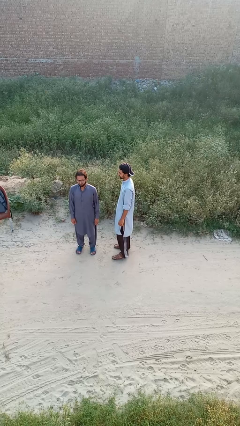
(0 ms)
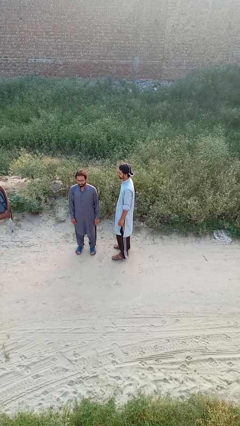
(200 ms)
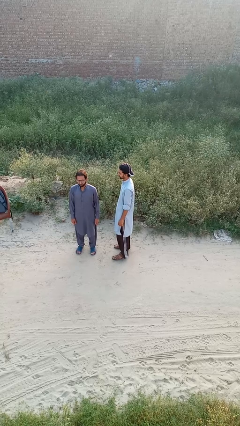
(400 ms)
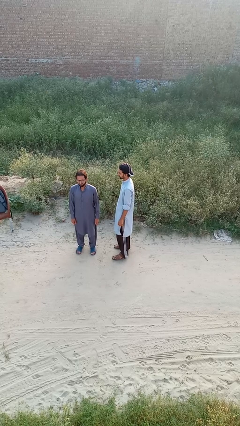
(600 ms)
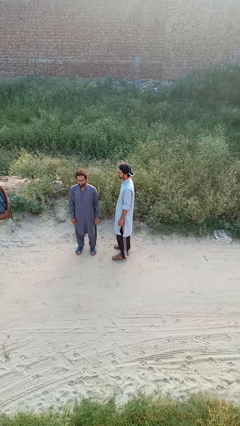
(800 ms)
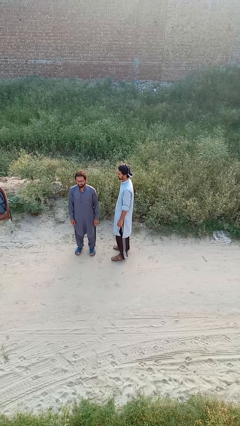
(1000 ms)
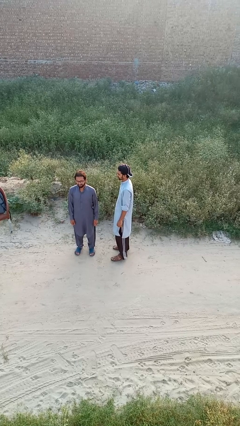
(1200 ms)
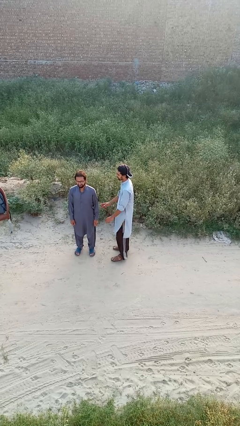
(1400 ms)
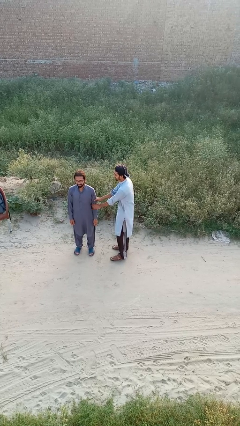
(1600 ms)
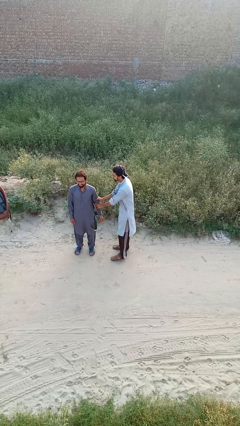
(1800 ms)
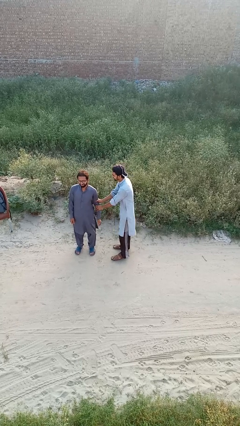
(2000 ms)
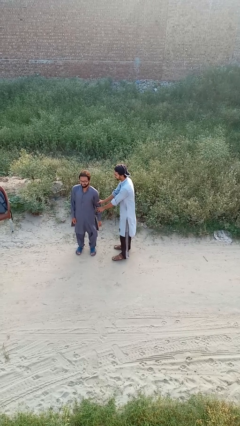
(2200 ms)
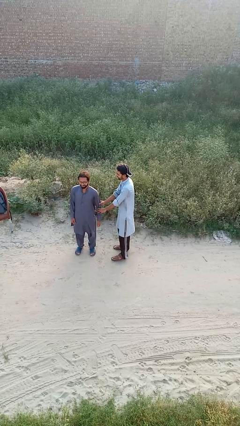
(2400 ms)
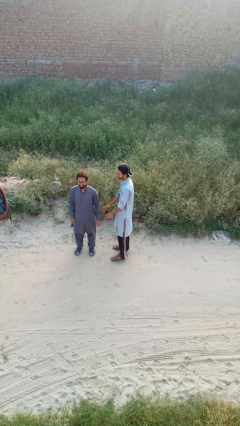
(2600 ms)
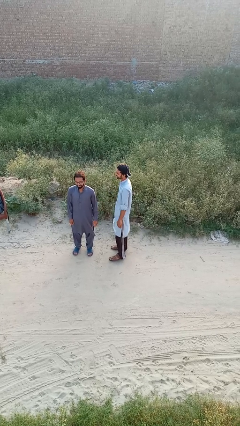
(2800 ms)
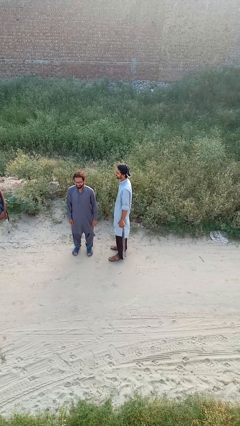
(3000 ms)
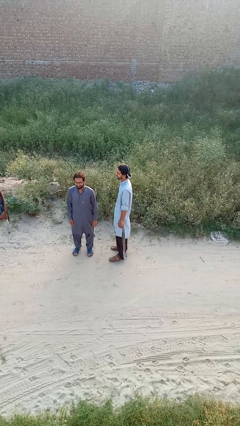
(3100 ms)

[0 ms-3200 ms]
person grabs person by forearm

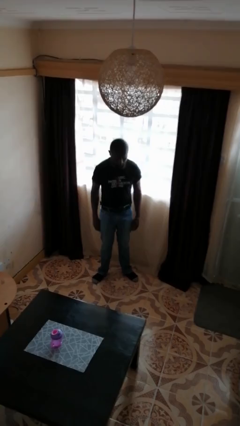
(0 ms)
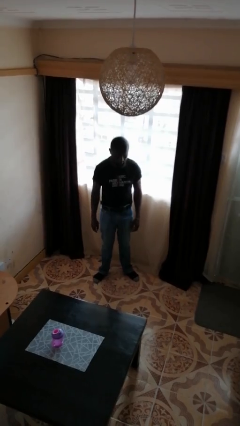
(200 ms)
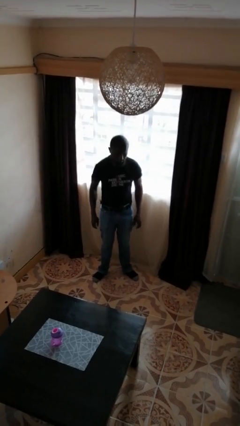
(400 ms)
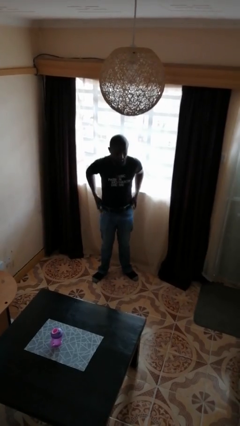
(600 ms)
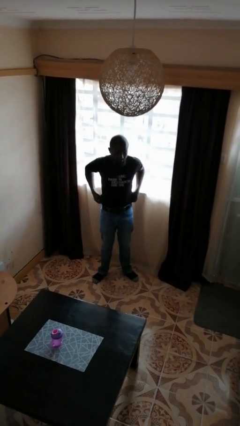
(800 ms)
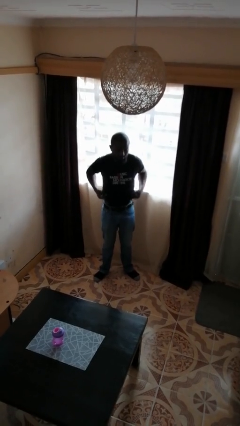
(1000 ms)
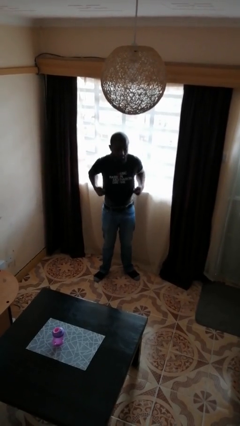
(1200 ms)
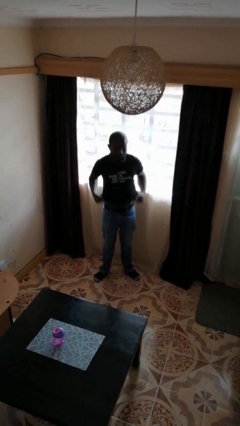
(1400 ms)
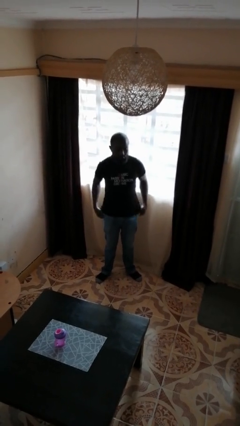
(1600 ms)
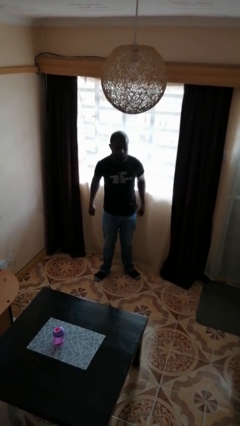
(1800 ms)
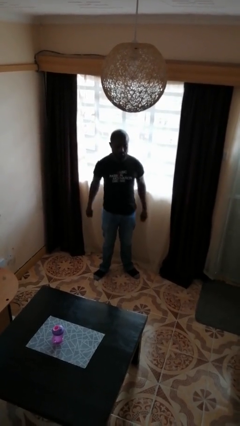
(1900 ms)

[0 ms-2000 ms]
person untucks shirt

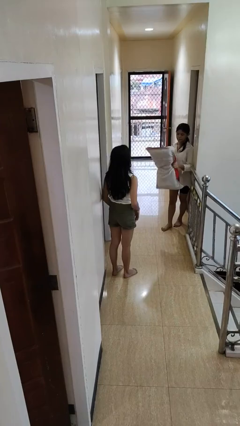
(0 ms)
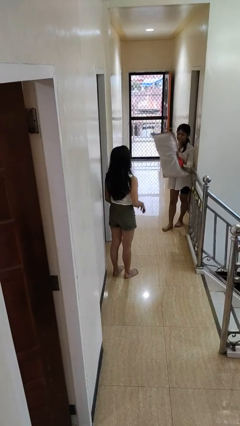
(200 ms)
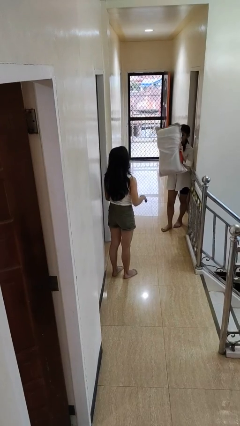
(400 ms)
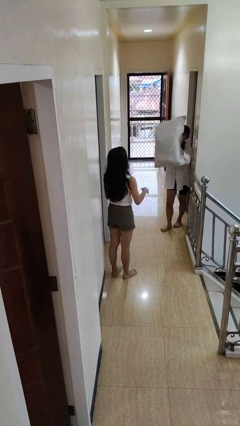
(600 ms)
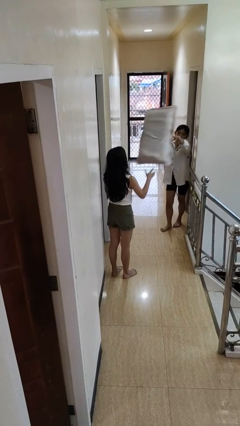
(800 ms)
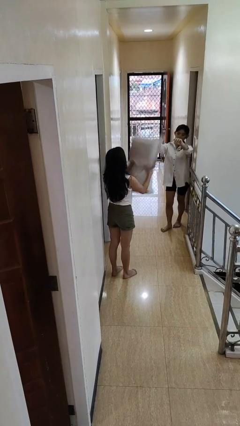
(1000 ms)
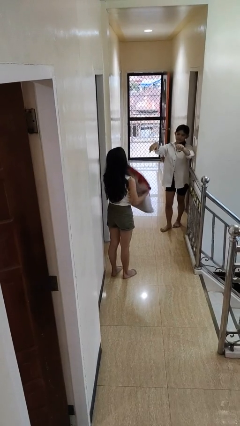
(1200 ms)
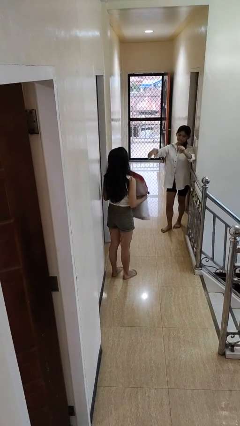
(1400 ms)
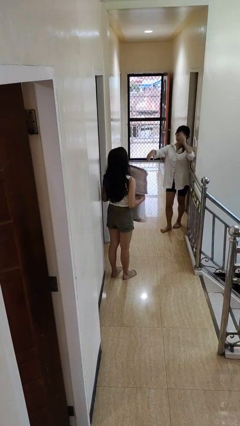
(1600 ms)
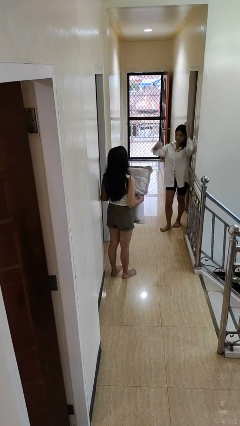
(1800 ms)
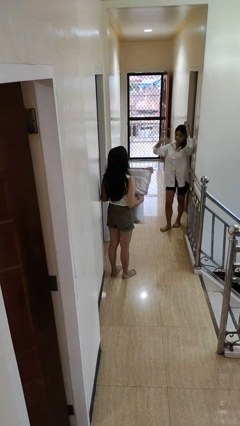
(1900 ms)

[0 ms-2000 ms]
person catches object from person

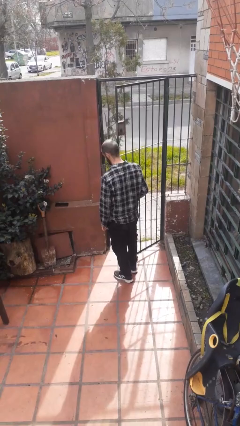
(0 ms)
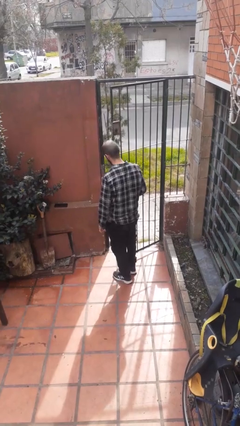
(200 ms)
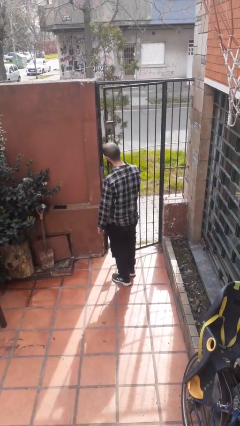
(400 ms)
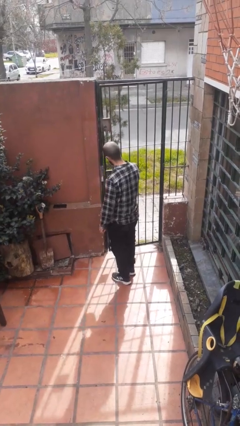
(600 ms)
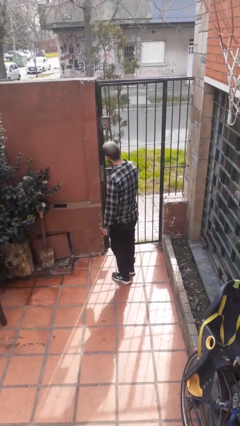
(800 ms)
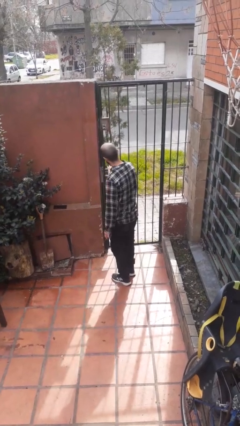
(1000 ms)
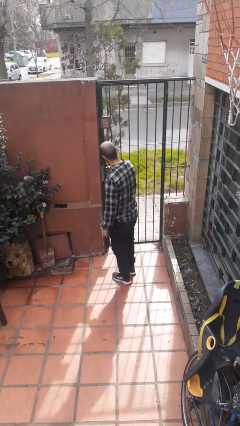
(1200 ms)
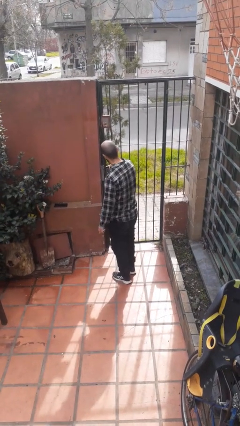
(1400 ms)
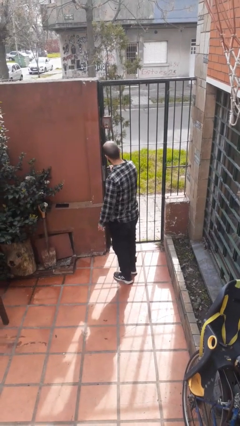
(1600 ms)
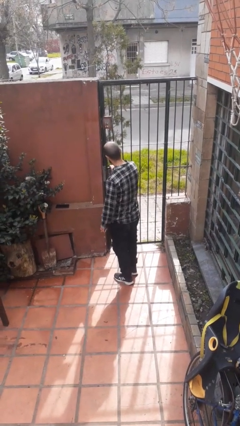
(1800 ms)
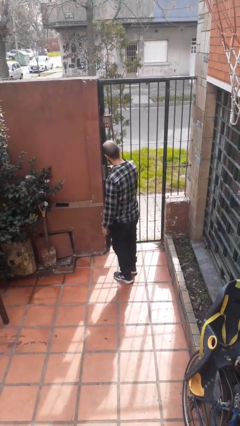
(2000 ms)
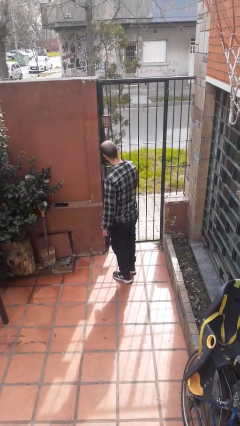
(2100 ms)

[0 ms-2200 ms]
person closes gate

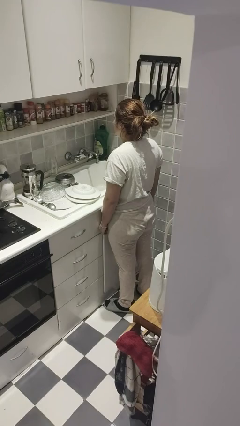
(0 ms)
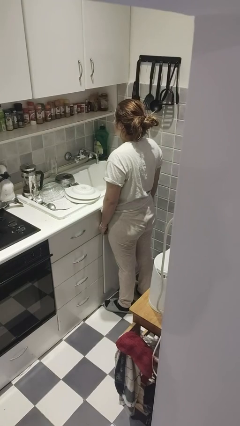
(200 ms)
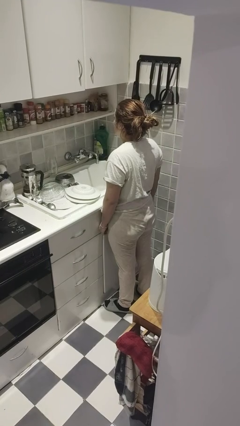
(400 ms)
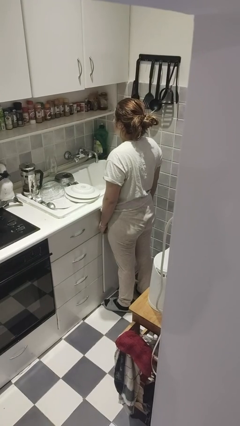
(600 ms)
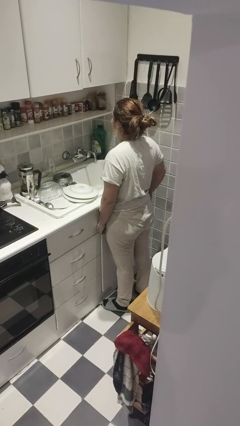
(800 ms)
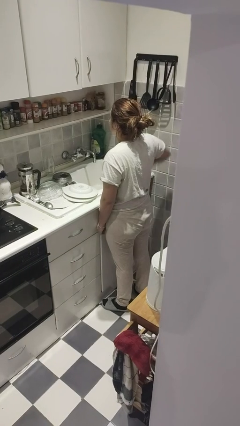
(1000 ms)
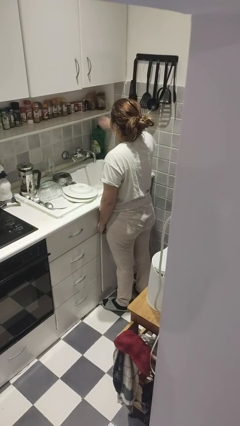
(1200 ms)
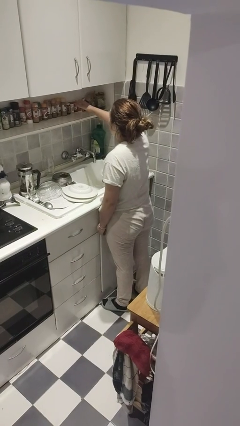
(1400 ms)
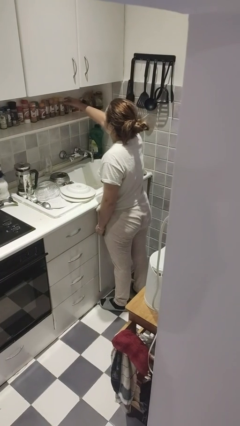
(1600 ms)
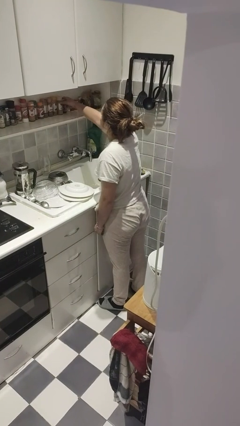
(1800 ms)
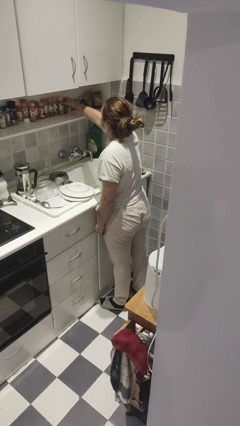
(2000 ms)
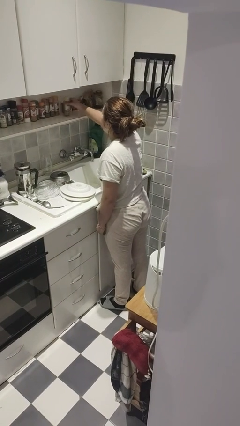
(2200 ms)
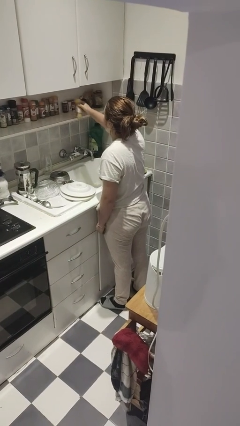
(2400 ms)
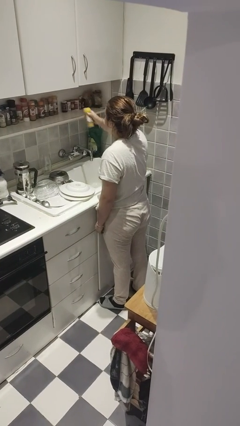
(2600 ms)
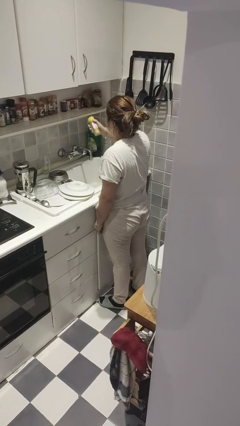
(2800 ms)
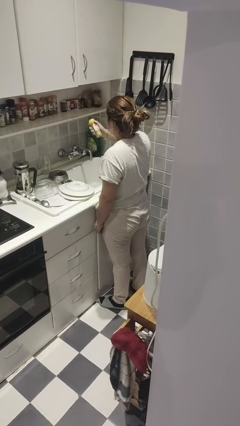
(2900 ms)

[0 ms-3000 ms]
person picks up object from countertop

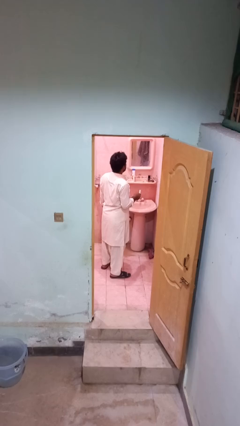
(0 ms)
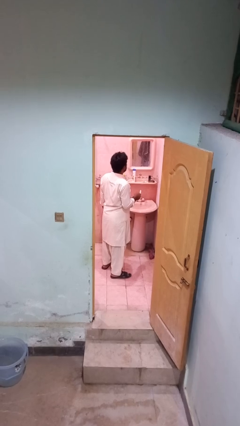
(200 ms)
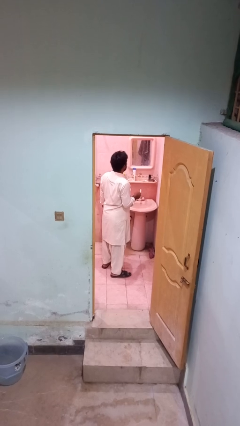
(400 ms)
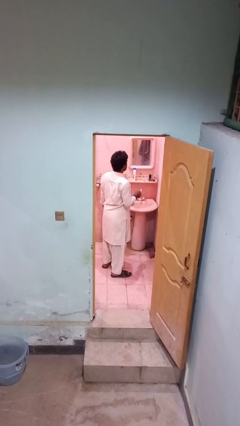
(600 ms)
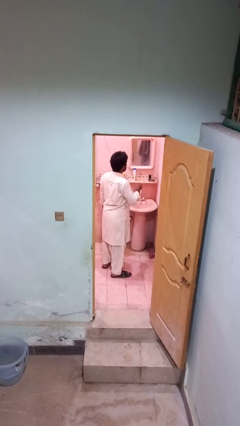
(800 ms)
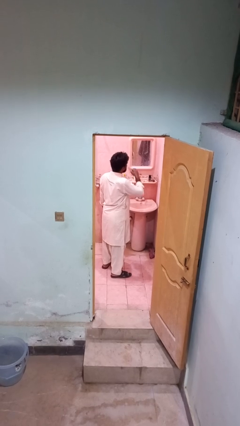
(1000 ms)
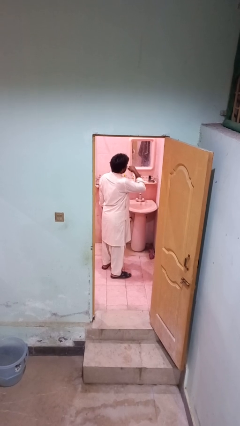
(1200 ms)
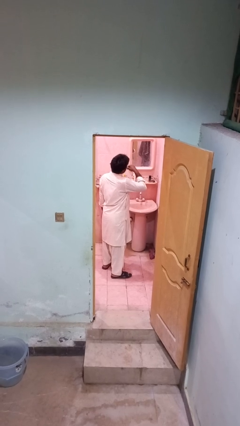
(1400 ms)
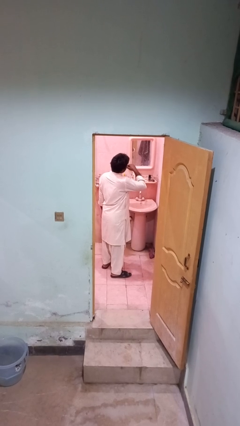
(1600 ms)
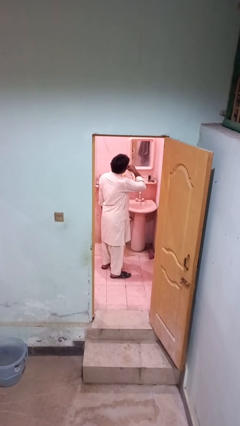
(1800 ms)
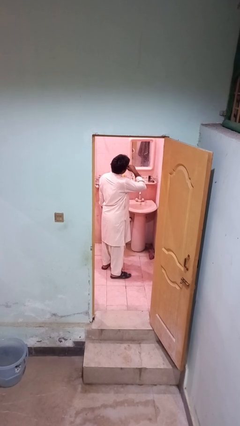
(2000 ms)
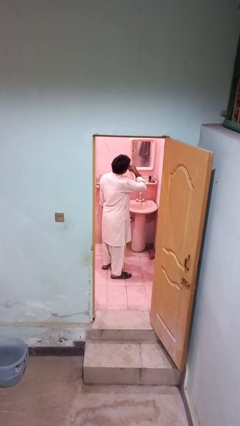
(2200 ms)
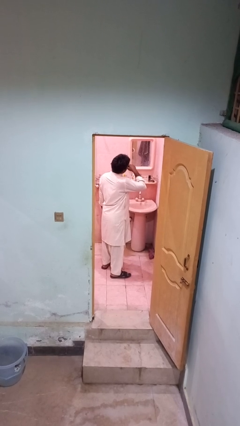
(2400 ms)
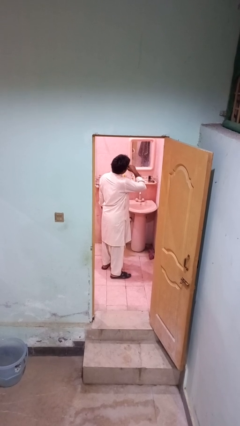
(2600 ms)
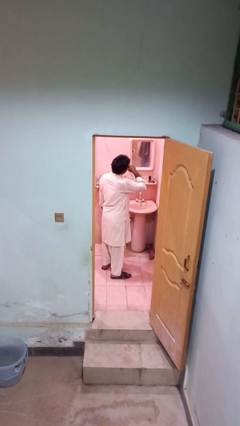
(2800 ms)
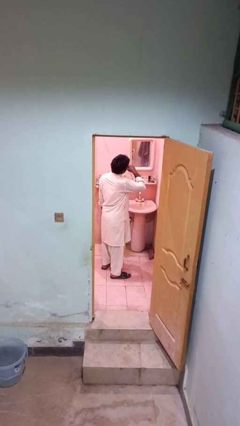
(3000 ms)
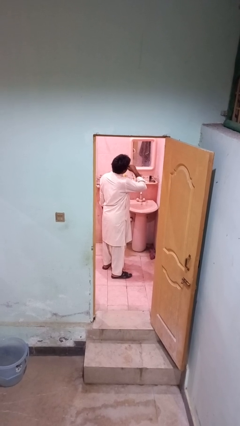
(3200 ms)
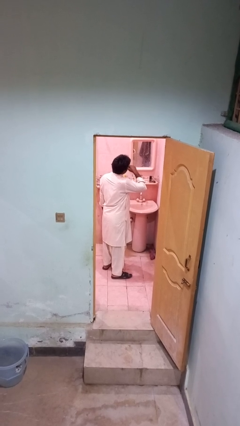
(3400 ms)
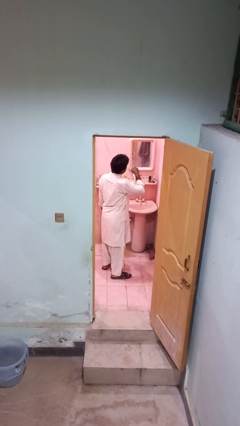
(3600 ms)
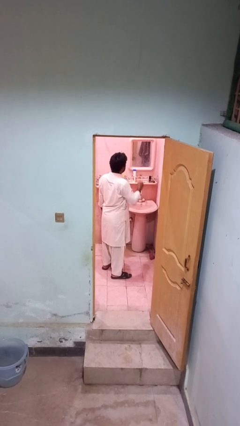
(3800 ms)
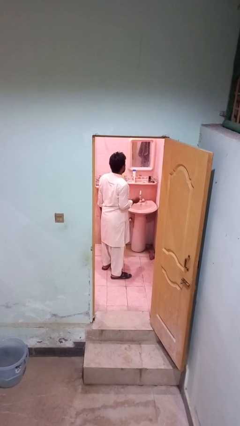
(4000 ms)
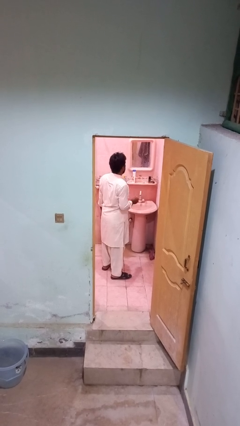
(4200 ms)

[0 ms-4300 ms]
person flosses
